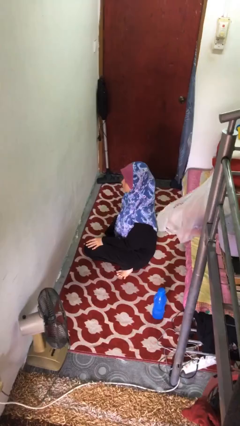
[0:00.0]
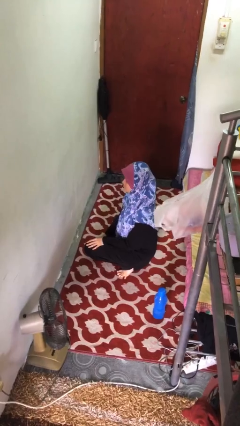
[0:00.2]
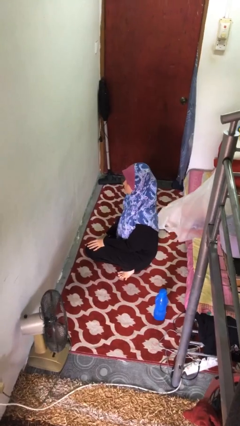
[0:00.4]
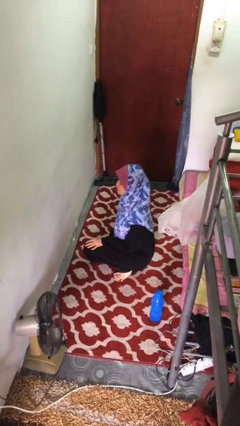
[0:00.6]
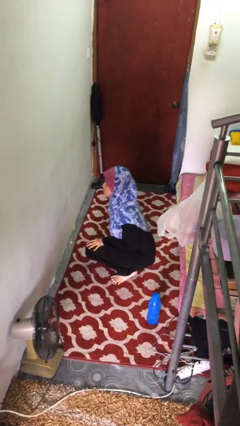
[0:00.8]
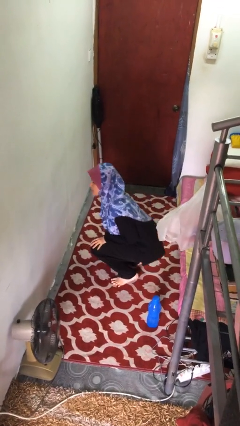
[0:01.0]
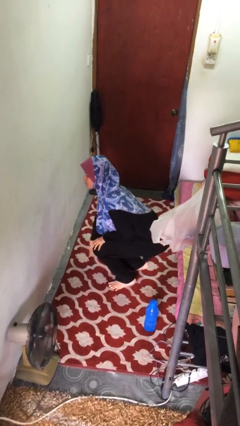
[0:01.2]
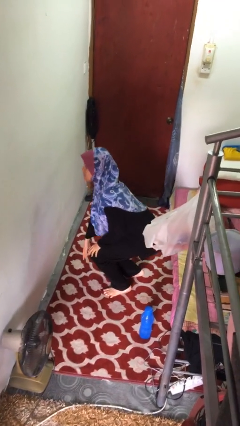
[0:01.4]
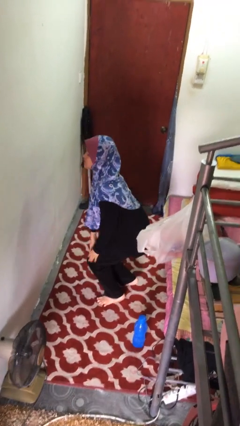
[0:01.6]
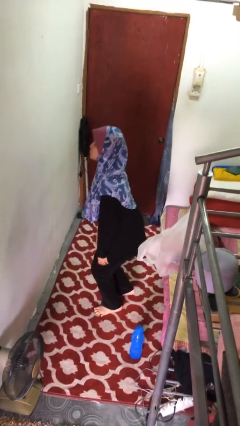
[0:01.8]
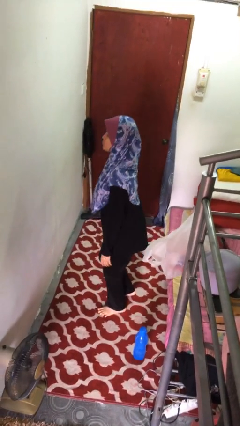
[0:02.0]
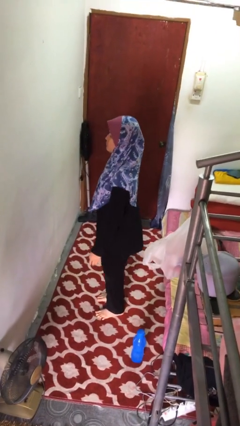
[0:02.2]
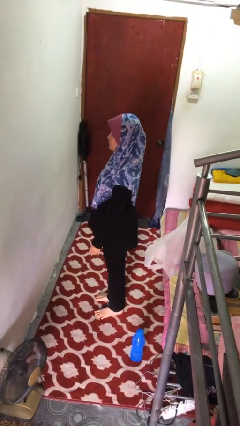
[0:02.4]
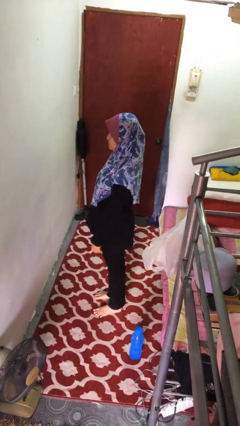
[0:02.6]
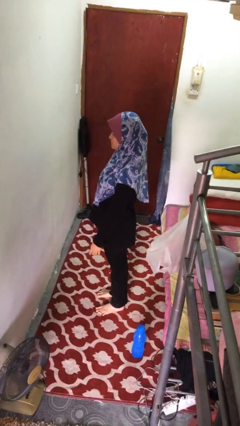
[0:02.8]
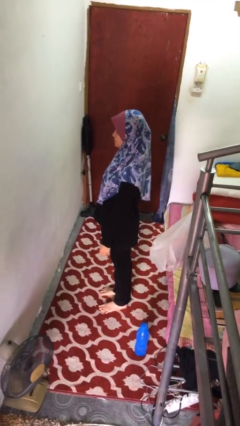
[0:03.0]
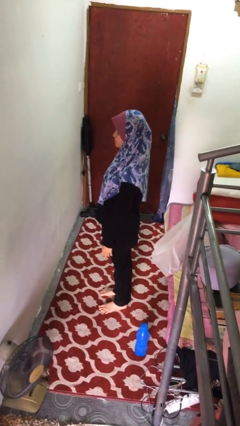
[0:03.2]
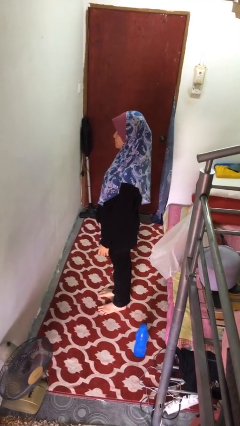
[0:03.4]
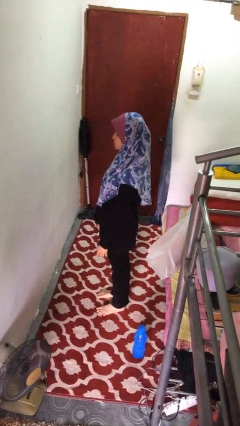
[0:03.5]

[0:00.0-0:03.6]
person stands up from floor

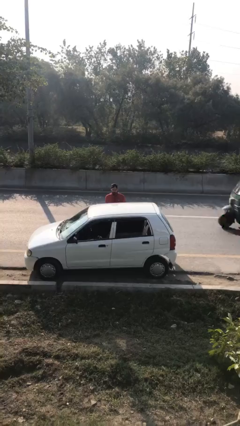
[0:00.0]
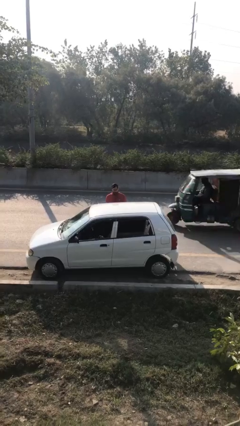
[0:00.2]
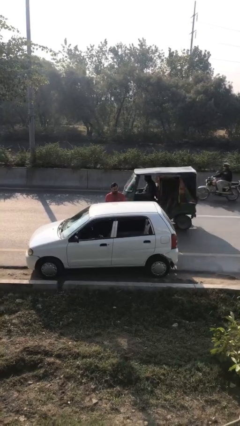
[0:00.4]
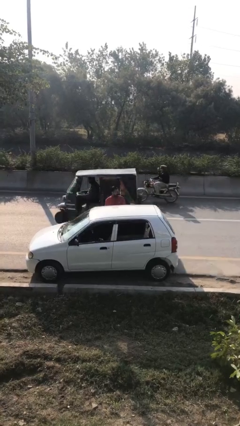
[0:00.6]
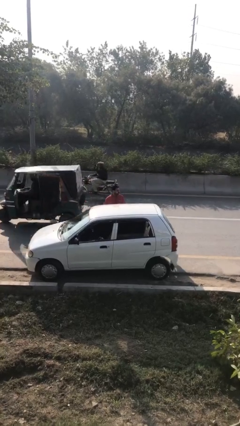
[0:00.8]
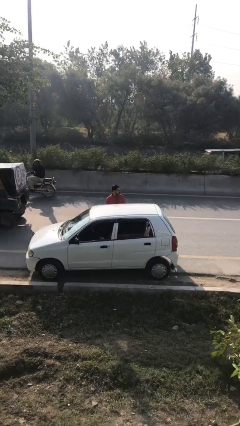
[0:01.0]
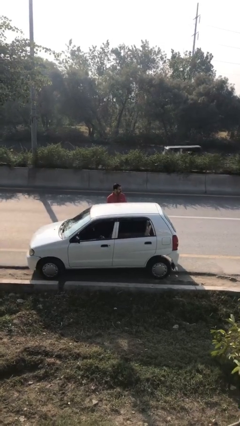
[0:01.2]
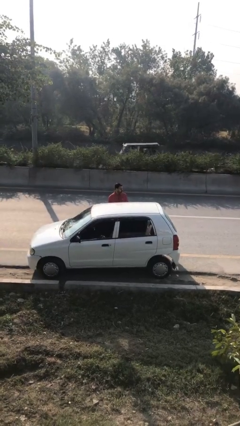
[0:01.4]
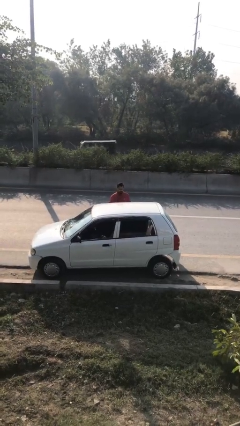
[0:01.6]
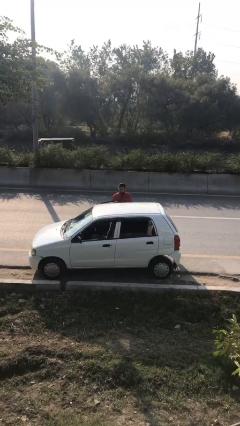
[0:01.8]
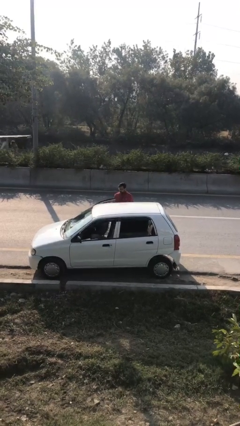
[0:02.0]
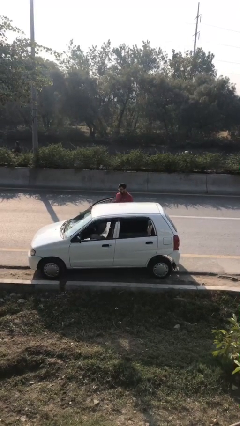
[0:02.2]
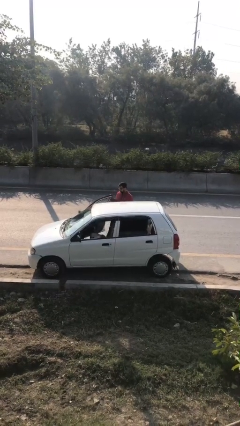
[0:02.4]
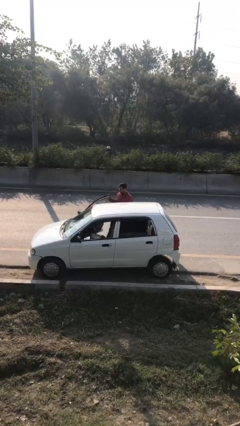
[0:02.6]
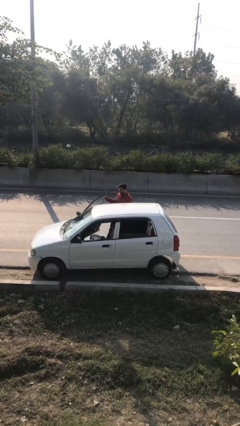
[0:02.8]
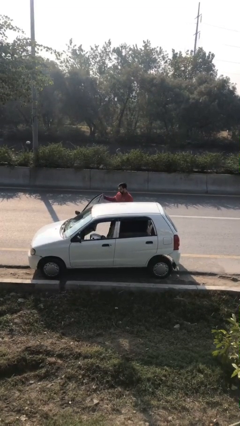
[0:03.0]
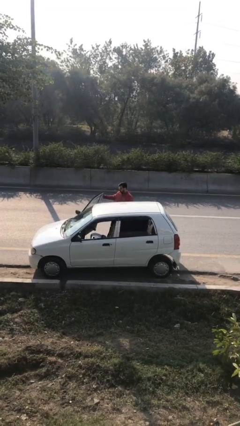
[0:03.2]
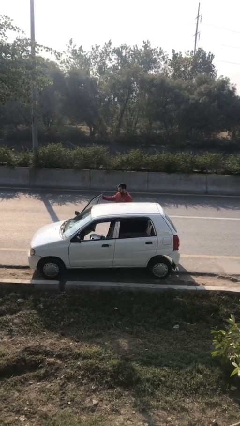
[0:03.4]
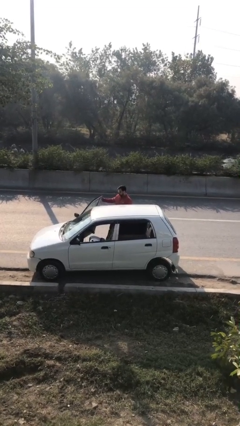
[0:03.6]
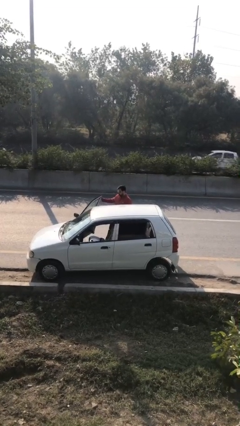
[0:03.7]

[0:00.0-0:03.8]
person opens car door

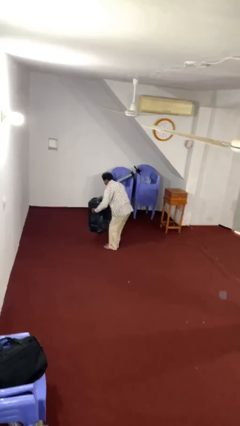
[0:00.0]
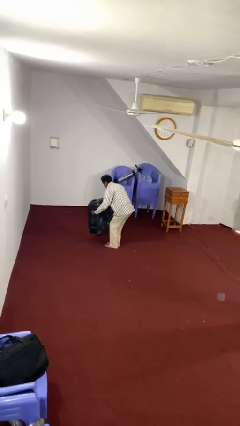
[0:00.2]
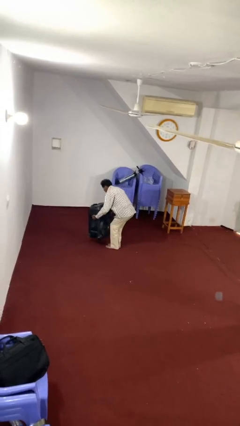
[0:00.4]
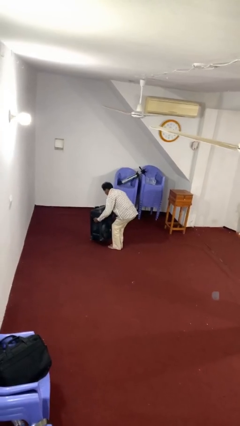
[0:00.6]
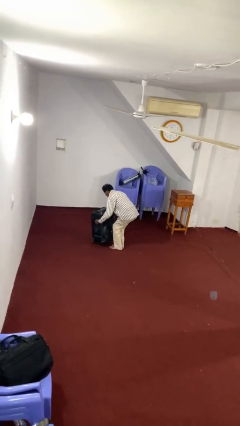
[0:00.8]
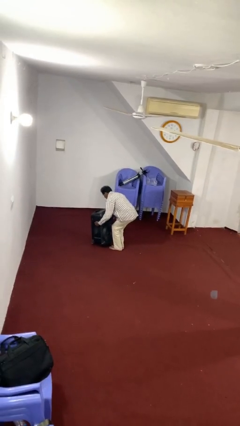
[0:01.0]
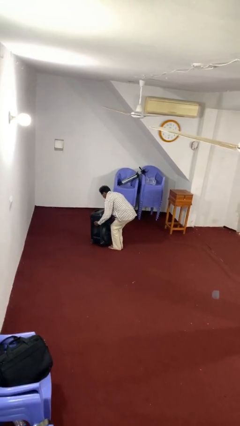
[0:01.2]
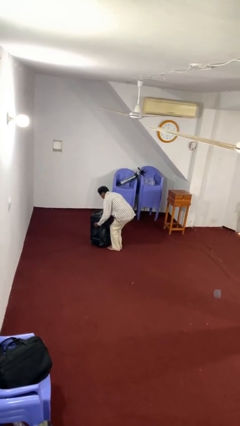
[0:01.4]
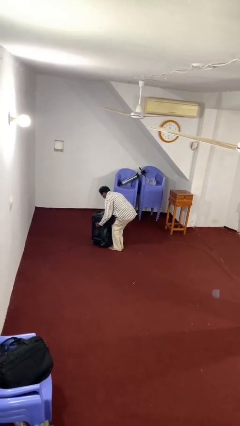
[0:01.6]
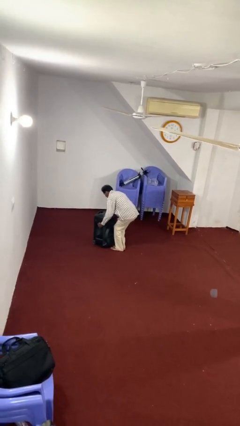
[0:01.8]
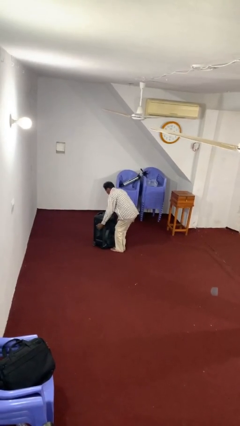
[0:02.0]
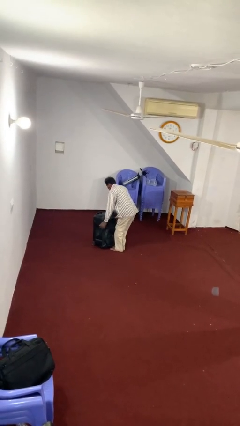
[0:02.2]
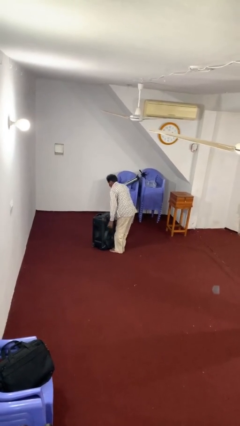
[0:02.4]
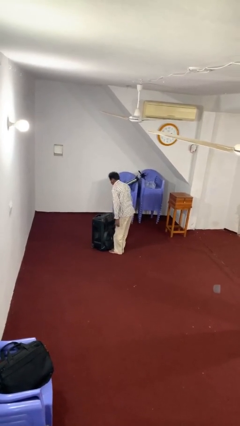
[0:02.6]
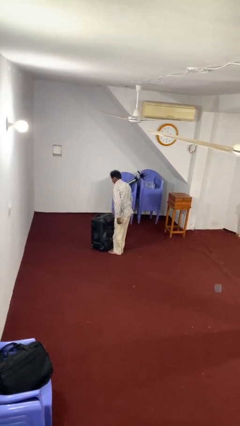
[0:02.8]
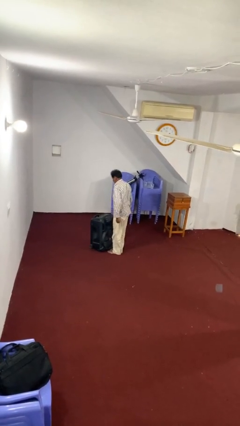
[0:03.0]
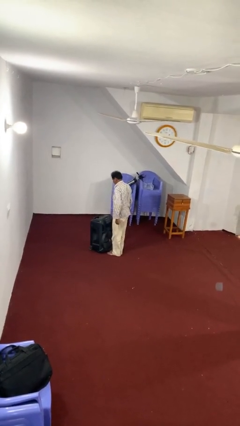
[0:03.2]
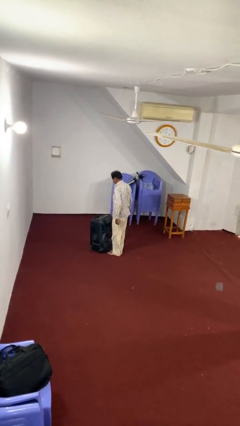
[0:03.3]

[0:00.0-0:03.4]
person puts down object on floor

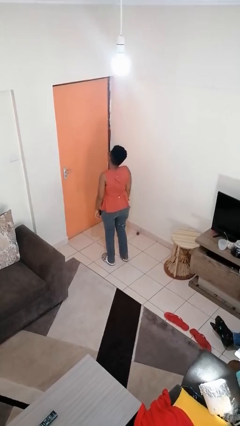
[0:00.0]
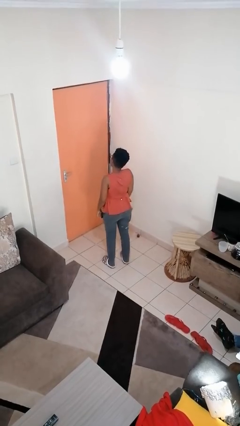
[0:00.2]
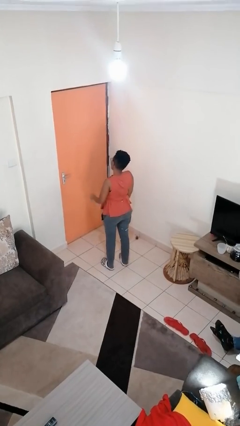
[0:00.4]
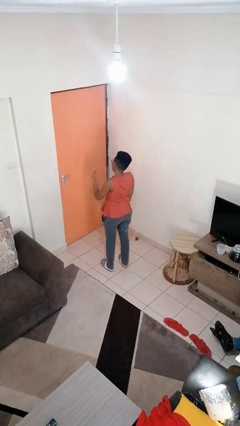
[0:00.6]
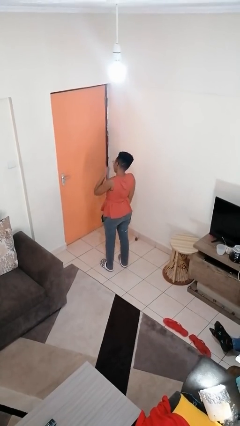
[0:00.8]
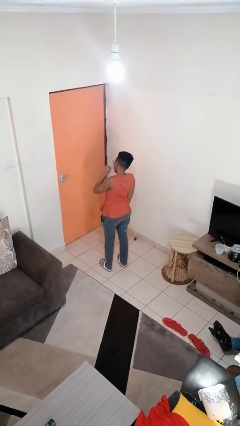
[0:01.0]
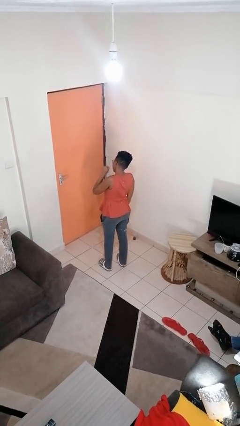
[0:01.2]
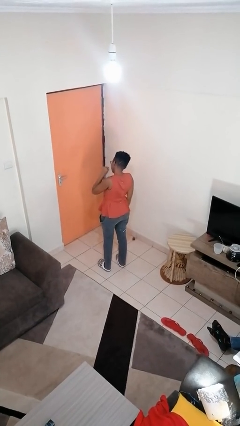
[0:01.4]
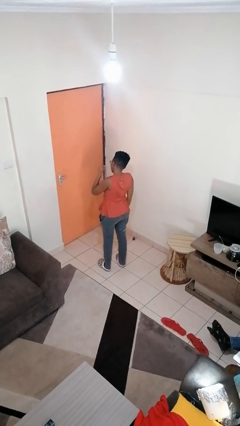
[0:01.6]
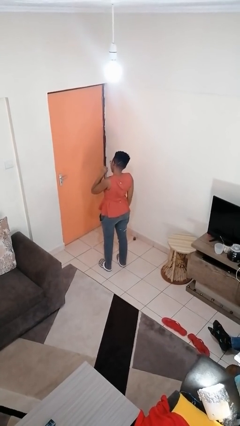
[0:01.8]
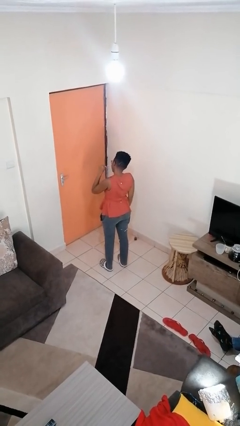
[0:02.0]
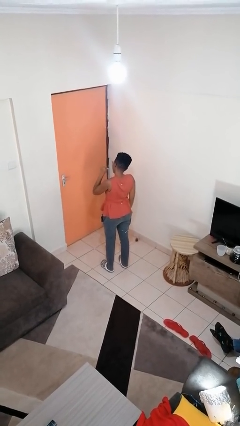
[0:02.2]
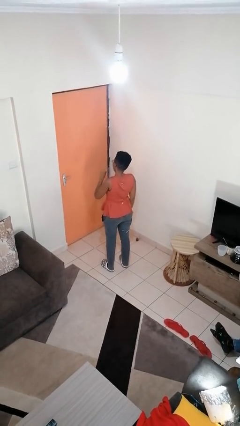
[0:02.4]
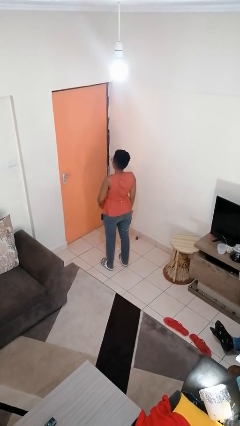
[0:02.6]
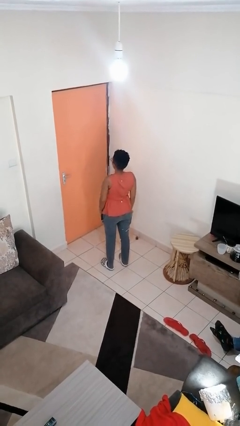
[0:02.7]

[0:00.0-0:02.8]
person gestures behind me

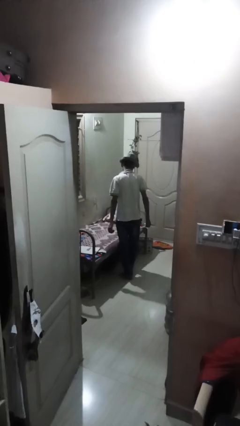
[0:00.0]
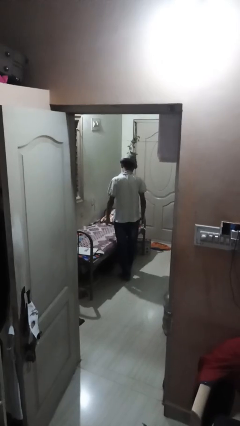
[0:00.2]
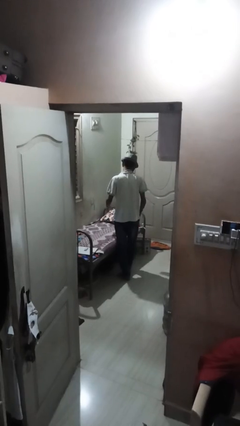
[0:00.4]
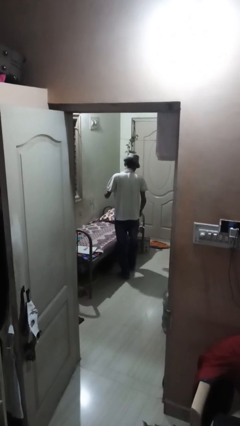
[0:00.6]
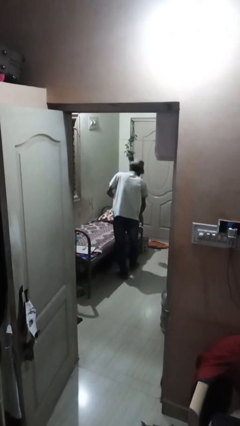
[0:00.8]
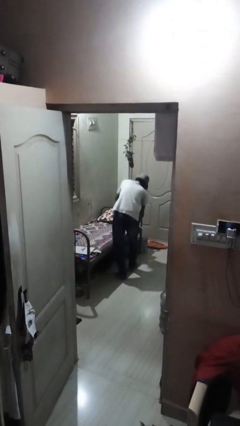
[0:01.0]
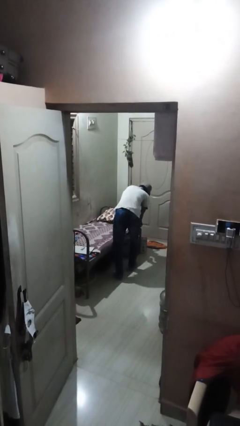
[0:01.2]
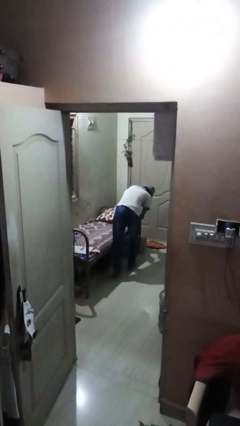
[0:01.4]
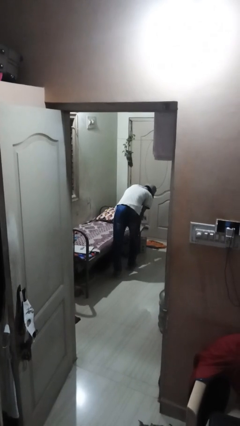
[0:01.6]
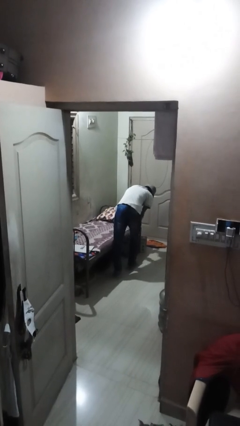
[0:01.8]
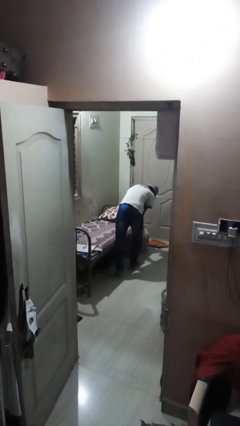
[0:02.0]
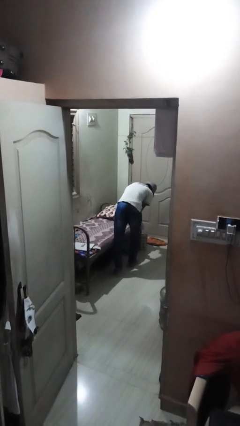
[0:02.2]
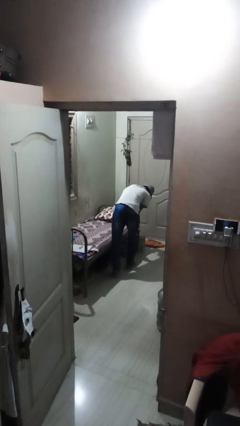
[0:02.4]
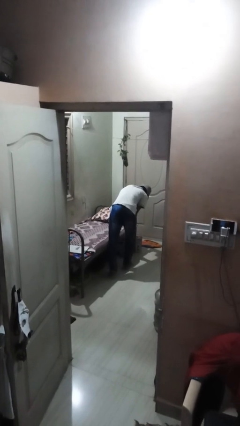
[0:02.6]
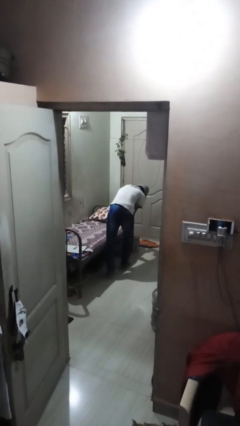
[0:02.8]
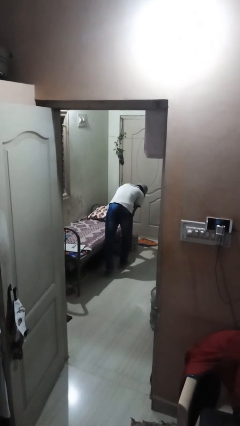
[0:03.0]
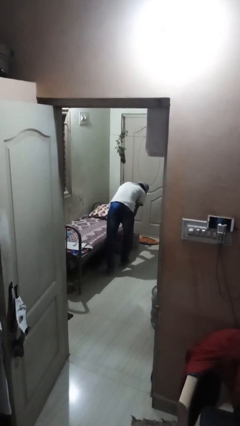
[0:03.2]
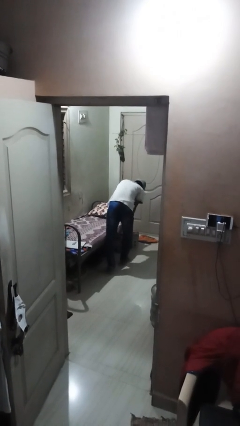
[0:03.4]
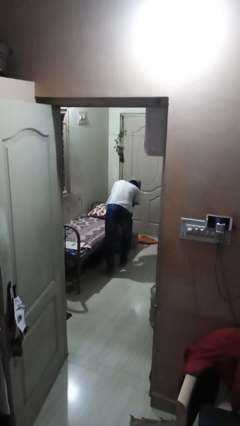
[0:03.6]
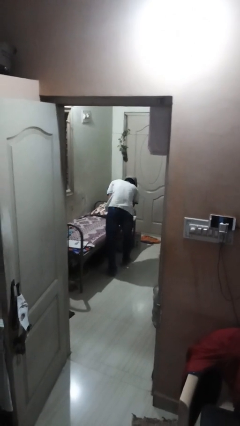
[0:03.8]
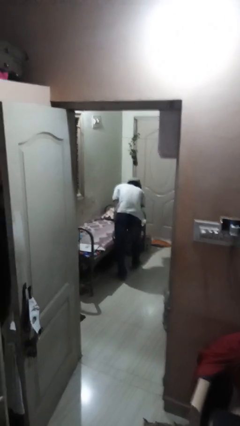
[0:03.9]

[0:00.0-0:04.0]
person makes bed
